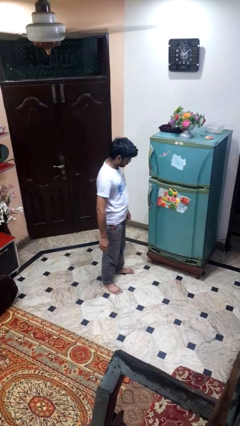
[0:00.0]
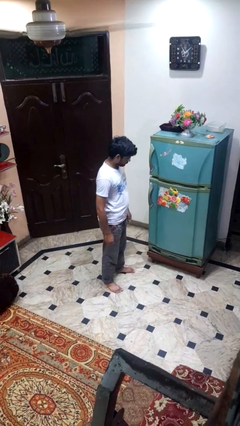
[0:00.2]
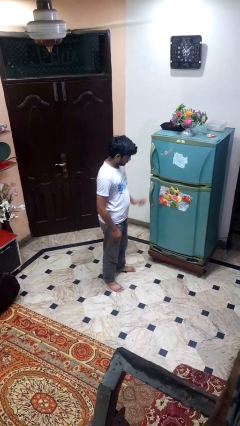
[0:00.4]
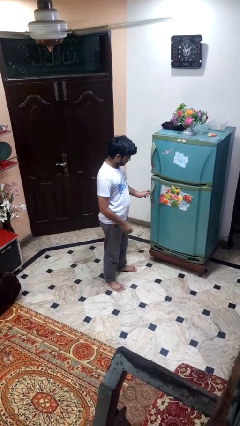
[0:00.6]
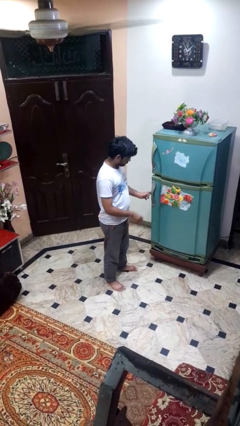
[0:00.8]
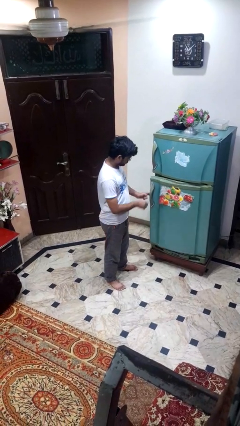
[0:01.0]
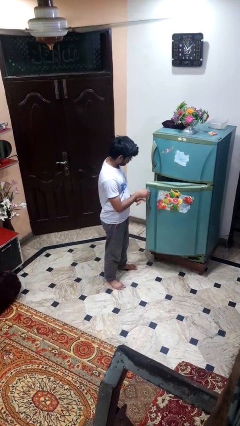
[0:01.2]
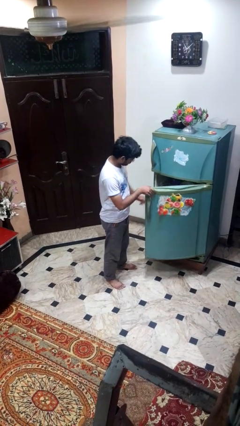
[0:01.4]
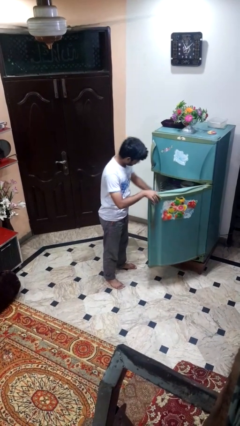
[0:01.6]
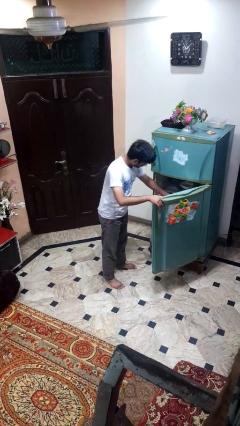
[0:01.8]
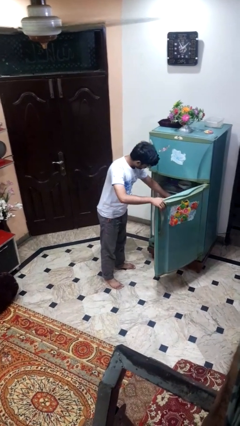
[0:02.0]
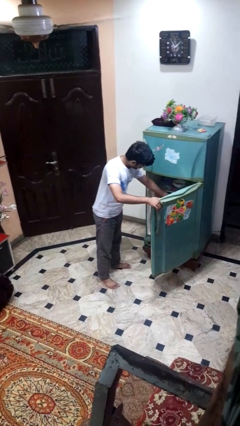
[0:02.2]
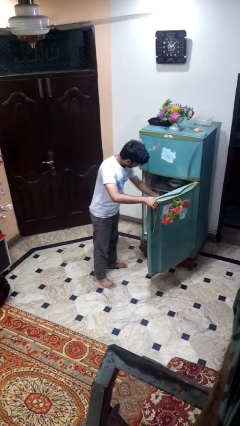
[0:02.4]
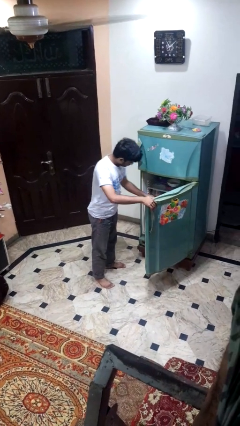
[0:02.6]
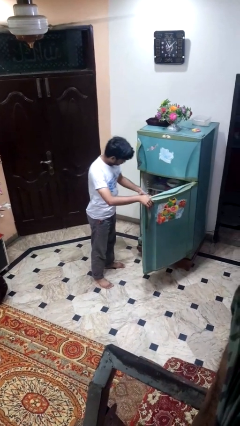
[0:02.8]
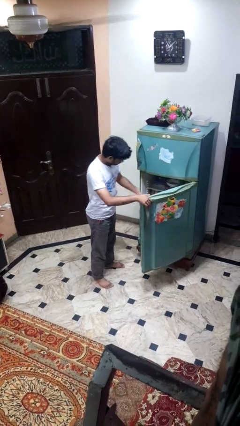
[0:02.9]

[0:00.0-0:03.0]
person takes object from refrigerator

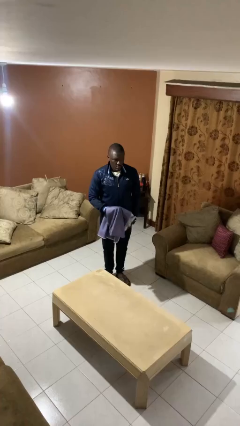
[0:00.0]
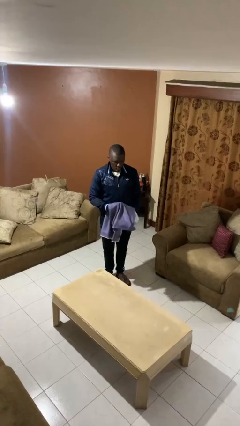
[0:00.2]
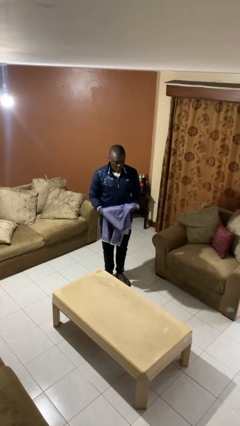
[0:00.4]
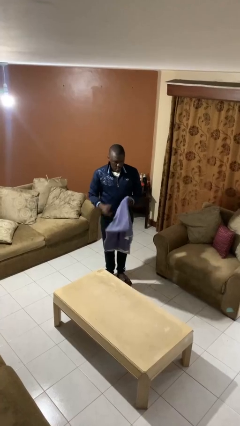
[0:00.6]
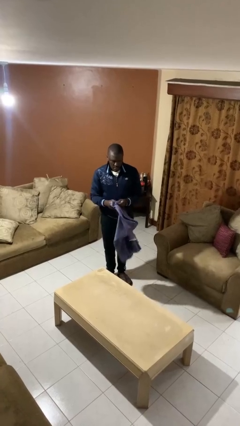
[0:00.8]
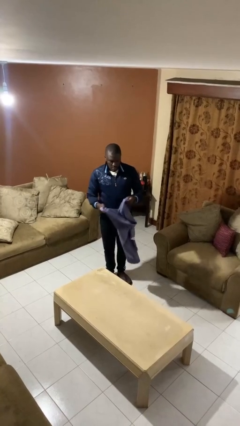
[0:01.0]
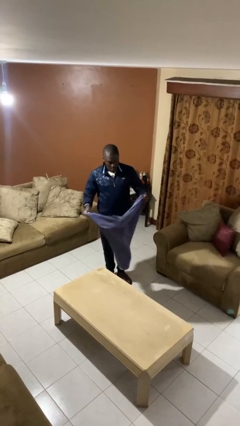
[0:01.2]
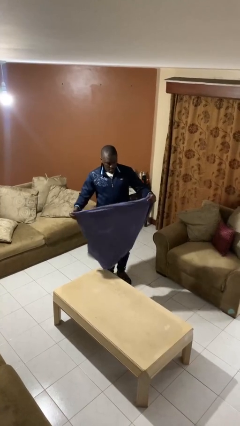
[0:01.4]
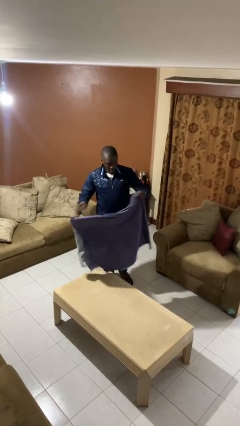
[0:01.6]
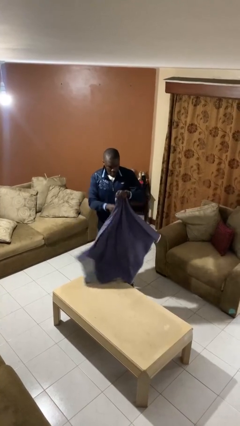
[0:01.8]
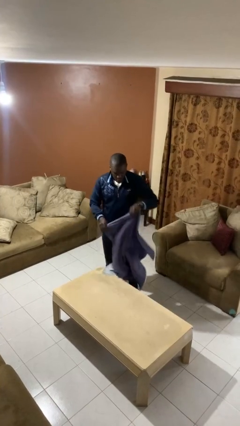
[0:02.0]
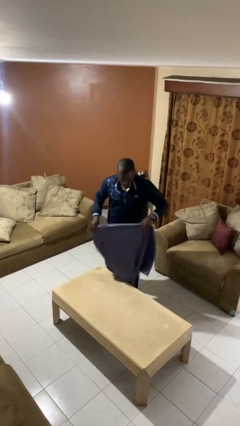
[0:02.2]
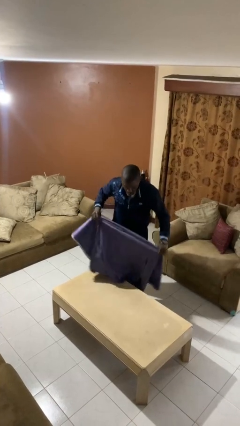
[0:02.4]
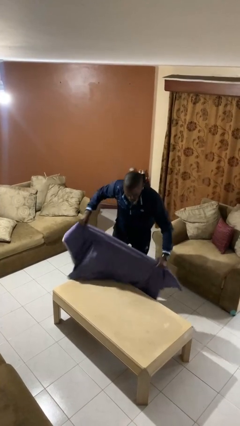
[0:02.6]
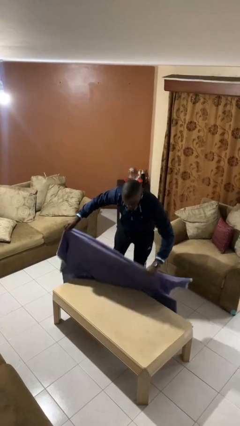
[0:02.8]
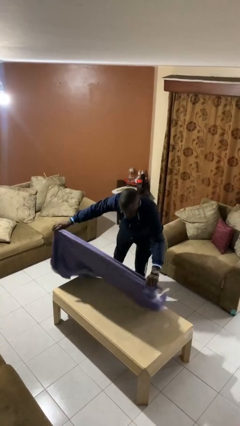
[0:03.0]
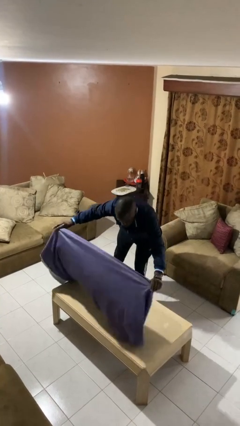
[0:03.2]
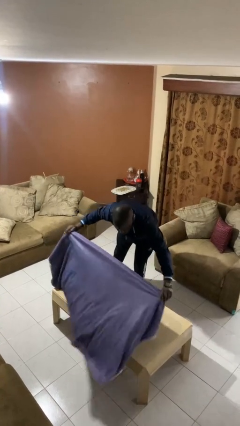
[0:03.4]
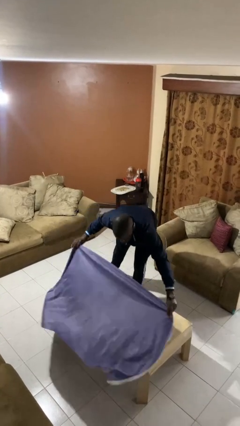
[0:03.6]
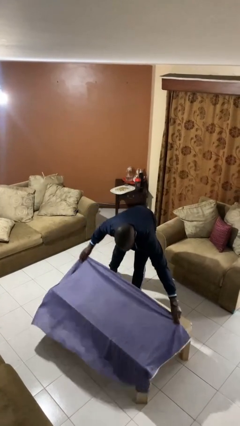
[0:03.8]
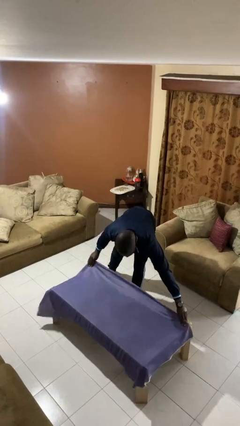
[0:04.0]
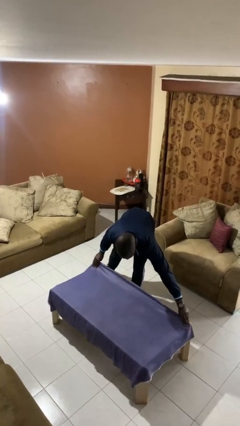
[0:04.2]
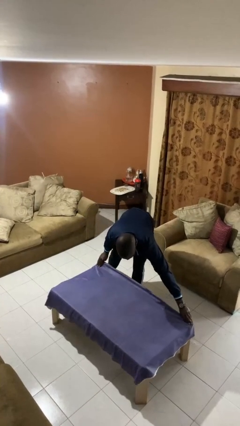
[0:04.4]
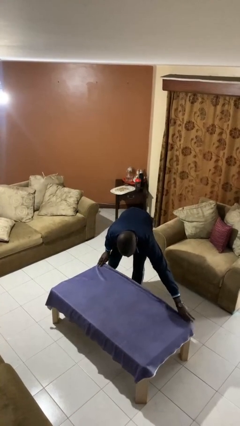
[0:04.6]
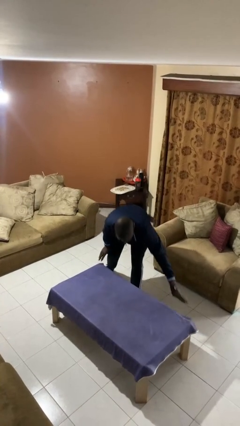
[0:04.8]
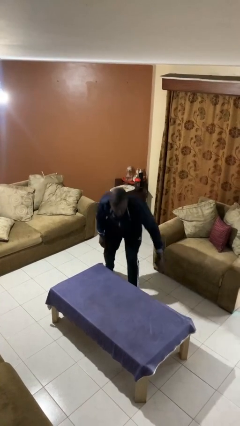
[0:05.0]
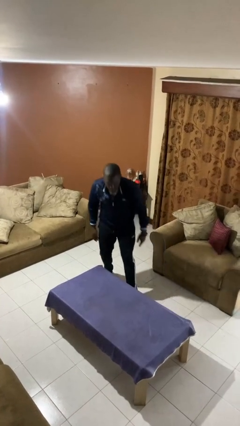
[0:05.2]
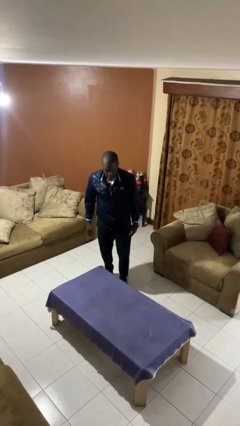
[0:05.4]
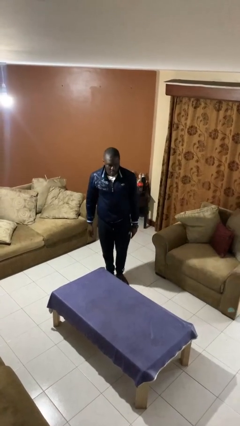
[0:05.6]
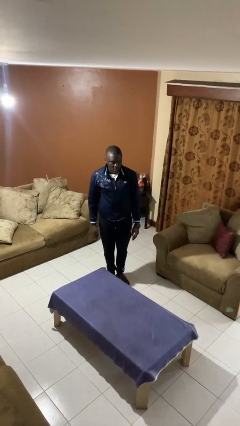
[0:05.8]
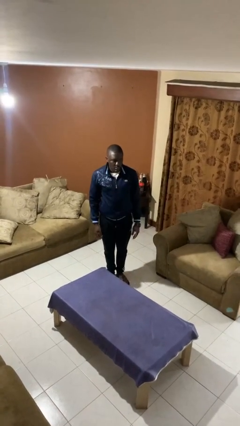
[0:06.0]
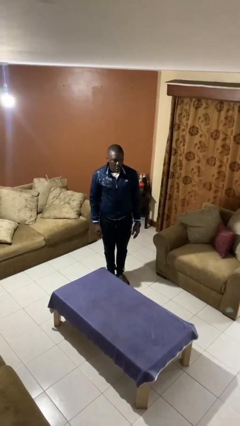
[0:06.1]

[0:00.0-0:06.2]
person spreads tablecloth

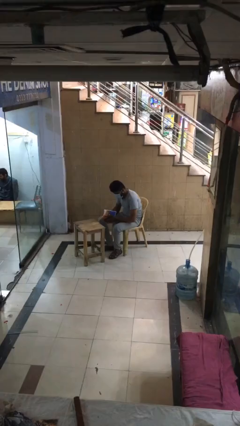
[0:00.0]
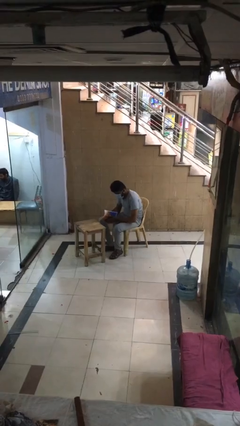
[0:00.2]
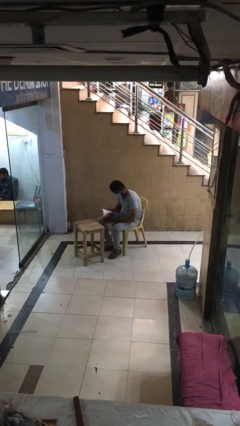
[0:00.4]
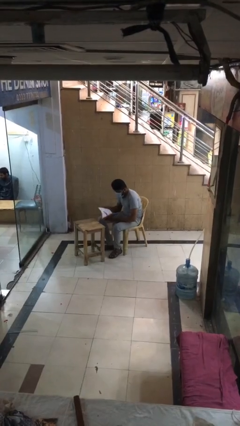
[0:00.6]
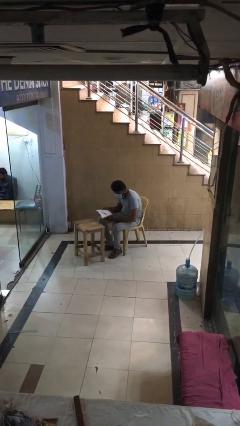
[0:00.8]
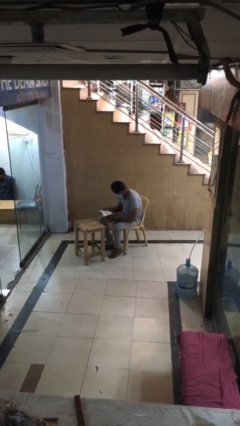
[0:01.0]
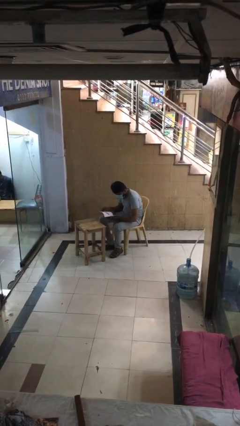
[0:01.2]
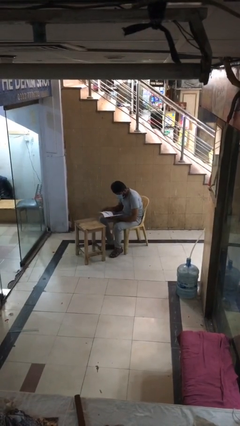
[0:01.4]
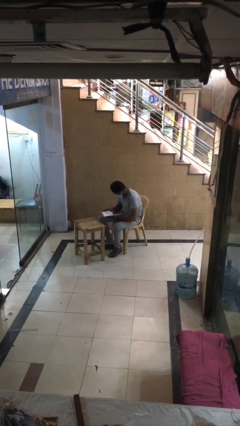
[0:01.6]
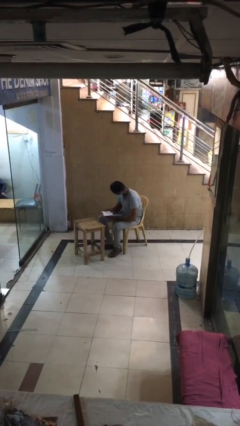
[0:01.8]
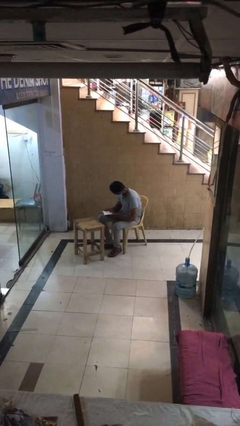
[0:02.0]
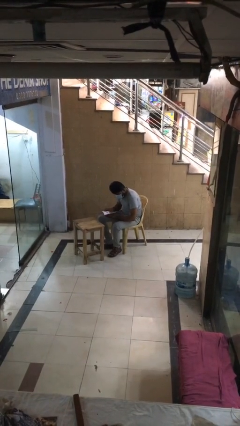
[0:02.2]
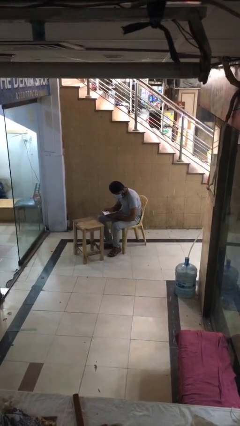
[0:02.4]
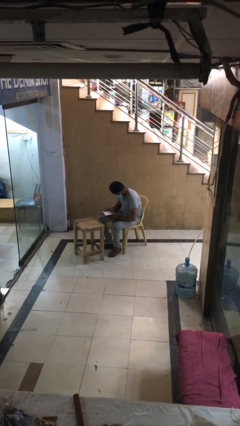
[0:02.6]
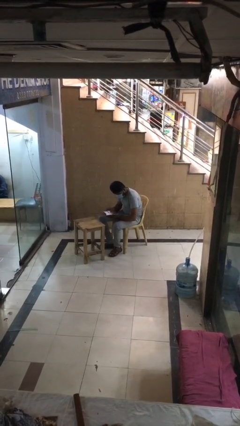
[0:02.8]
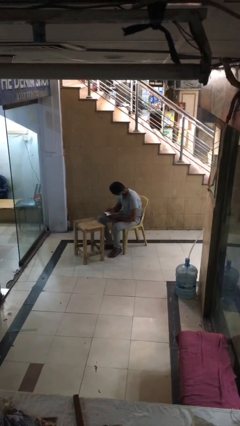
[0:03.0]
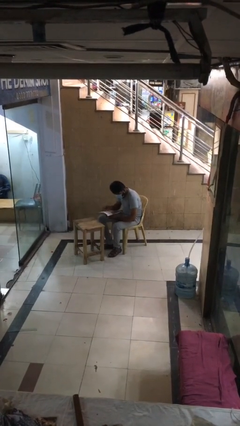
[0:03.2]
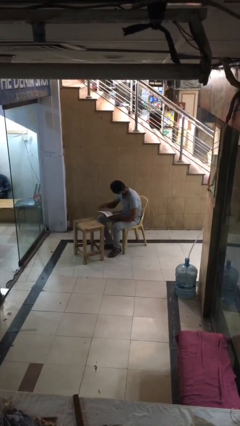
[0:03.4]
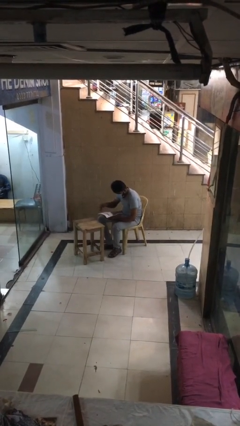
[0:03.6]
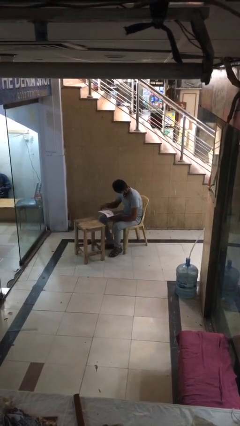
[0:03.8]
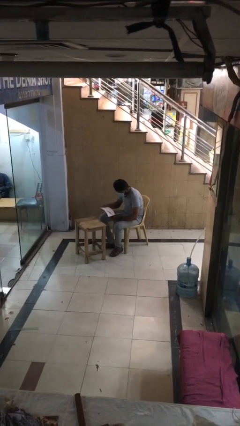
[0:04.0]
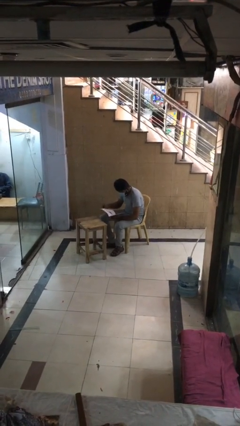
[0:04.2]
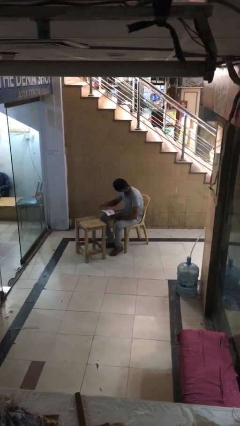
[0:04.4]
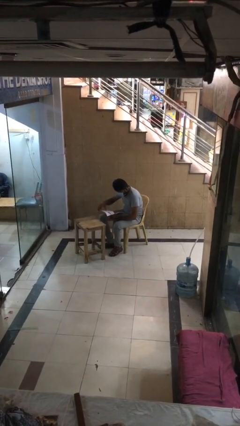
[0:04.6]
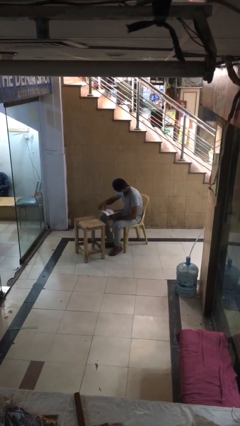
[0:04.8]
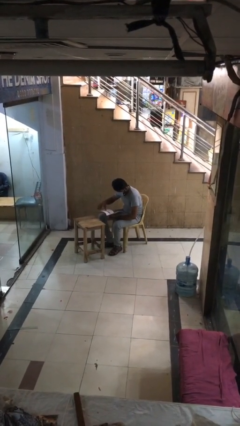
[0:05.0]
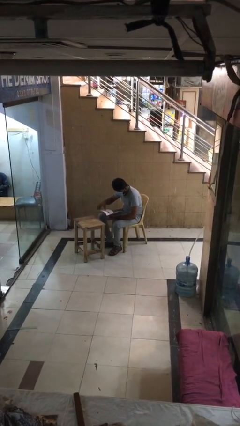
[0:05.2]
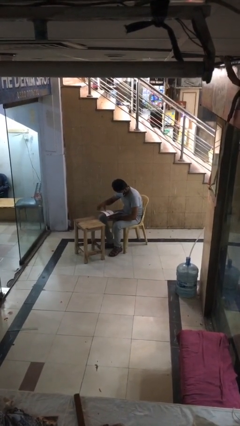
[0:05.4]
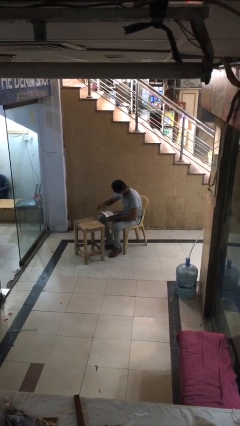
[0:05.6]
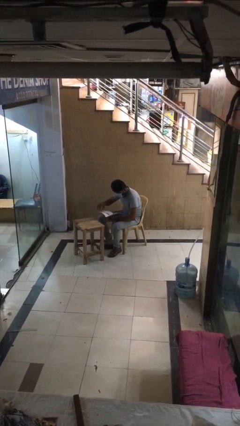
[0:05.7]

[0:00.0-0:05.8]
person reads document

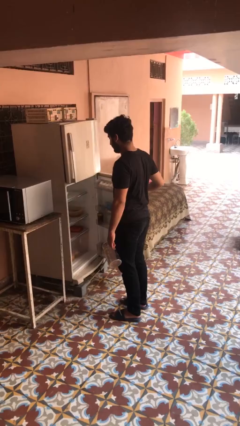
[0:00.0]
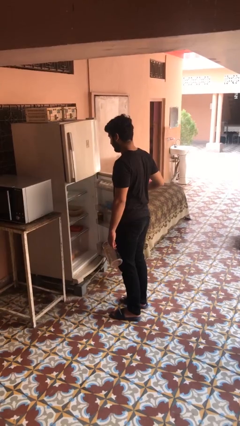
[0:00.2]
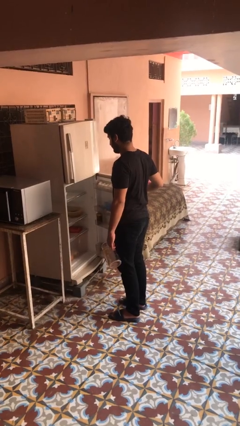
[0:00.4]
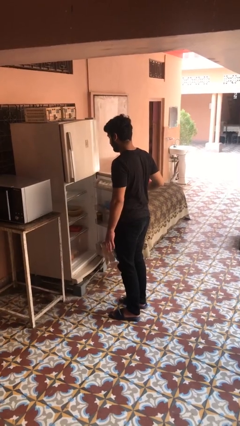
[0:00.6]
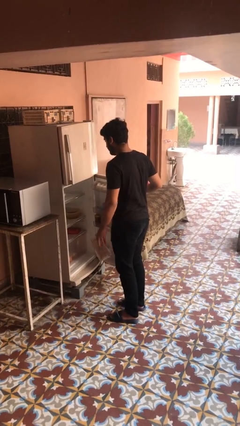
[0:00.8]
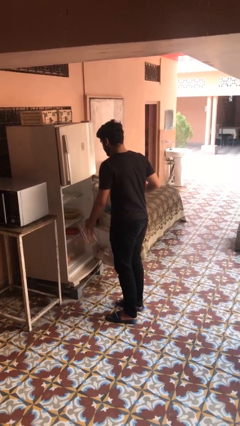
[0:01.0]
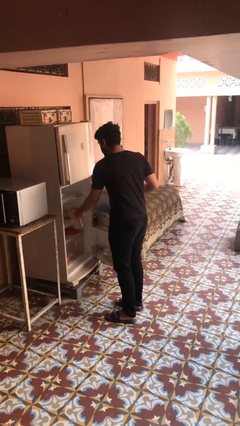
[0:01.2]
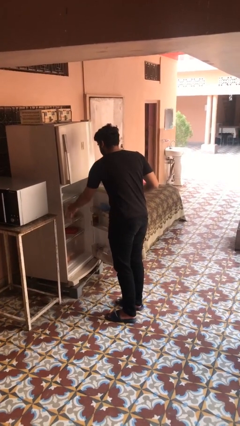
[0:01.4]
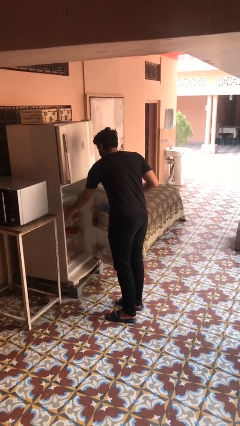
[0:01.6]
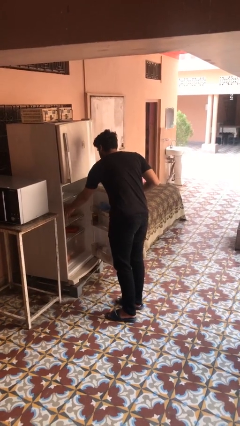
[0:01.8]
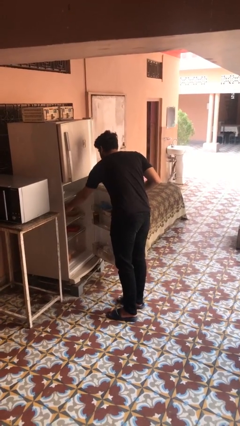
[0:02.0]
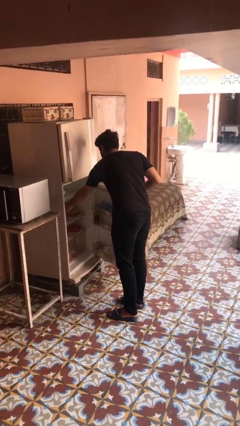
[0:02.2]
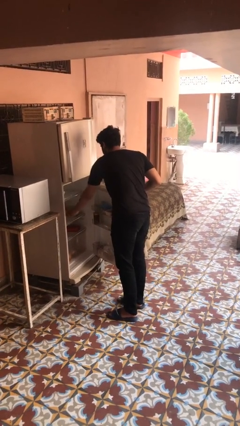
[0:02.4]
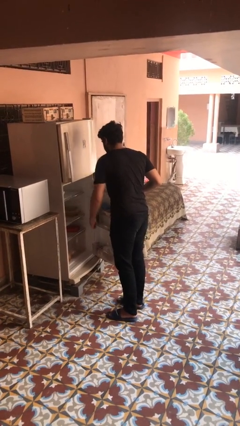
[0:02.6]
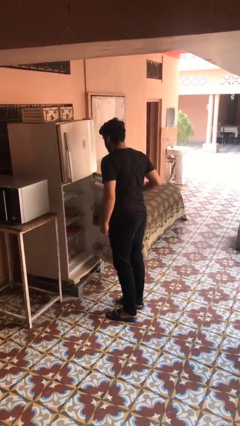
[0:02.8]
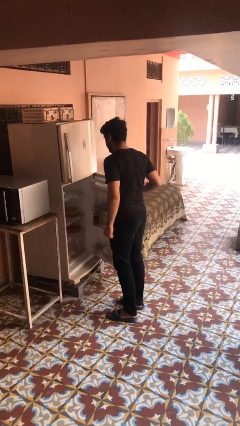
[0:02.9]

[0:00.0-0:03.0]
person puts object into refrigerator
